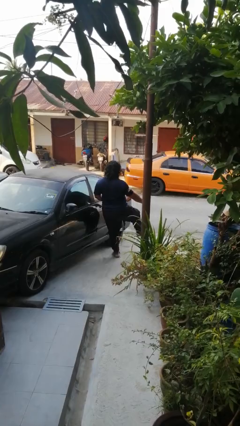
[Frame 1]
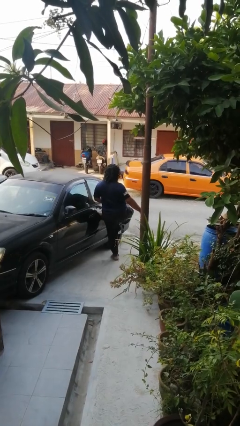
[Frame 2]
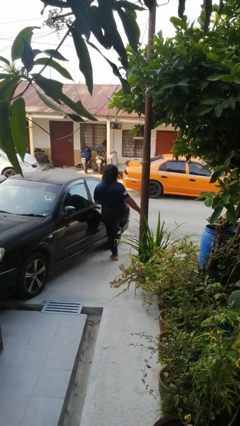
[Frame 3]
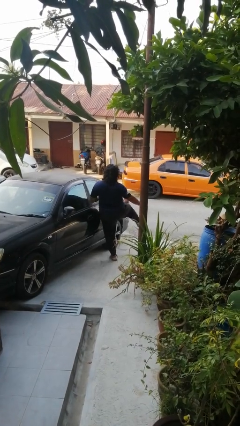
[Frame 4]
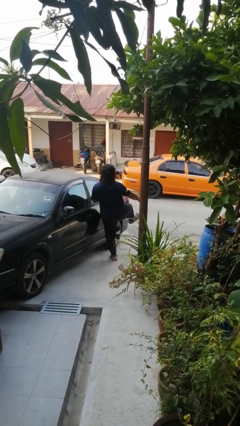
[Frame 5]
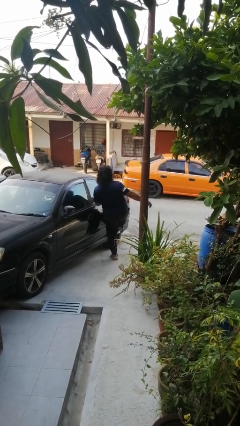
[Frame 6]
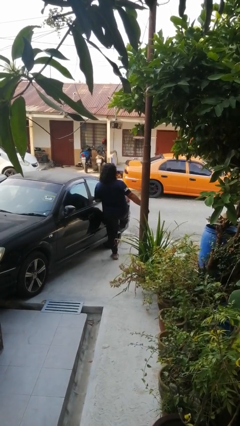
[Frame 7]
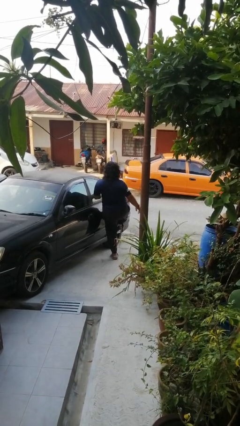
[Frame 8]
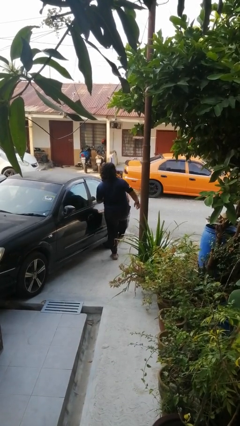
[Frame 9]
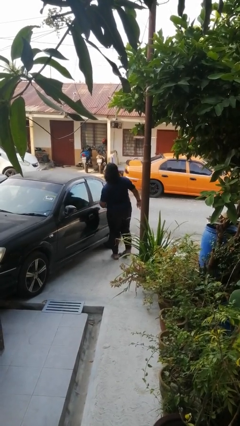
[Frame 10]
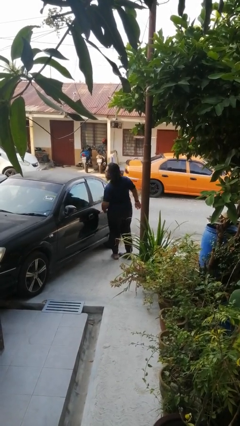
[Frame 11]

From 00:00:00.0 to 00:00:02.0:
person kicks car tires

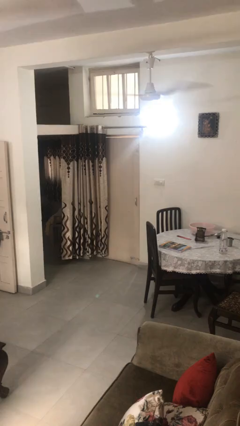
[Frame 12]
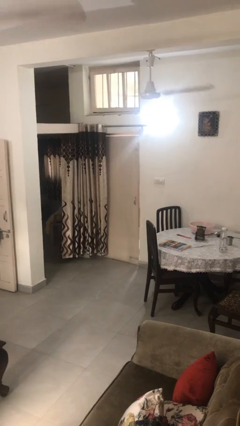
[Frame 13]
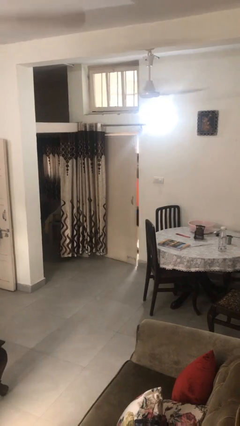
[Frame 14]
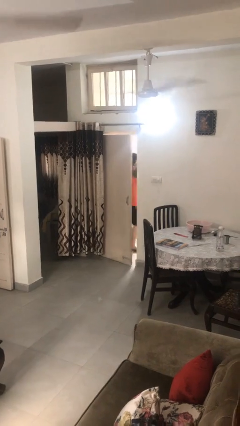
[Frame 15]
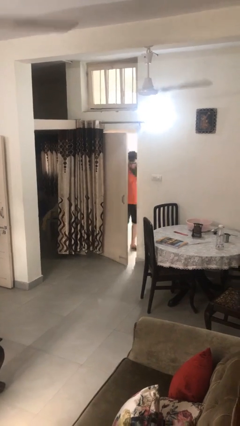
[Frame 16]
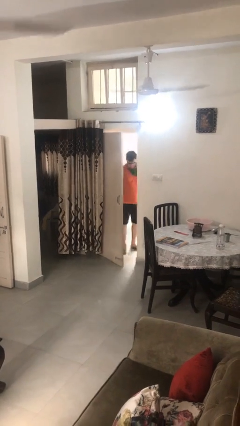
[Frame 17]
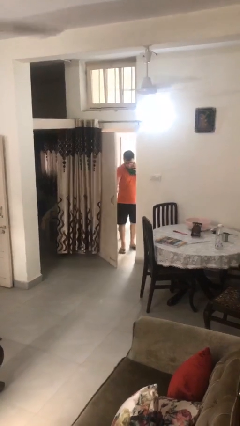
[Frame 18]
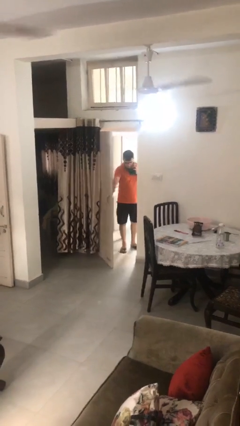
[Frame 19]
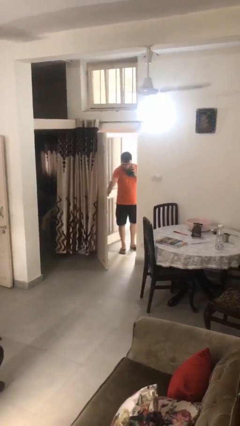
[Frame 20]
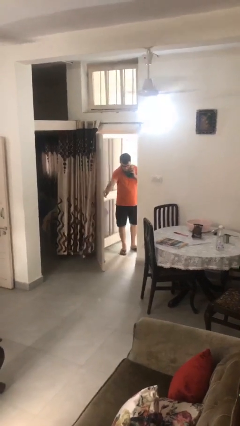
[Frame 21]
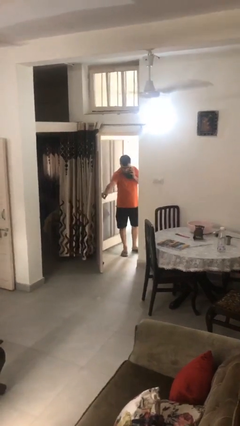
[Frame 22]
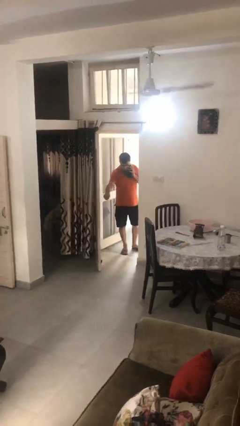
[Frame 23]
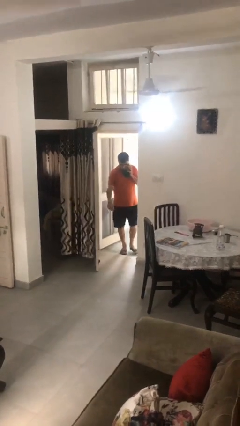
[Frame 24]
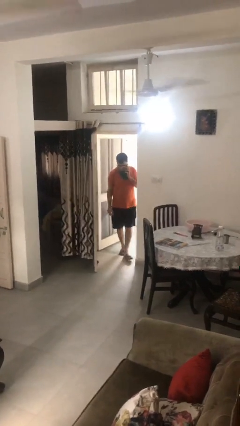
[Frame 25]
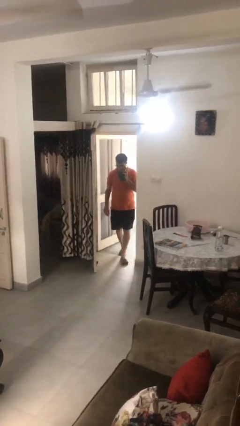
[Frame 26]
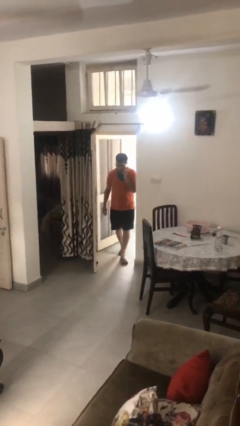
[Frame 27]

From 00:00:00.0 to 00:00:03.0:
person opens facility door

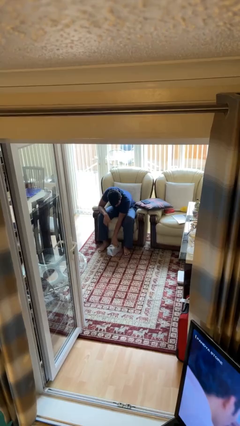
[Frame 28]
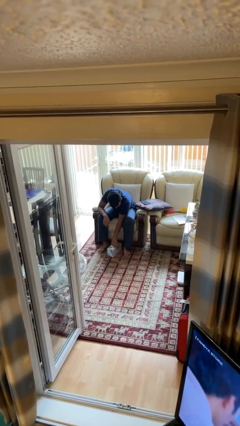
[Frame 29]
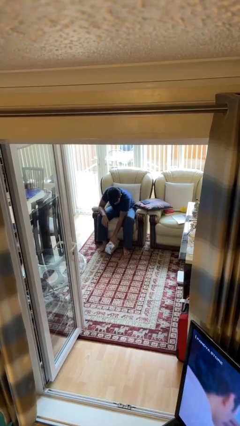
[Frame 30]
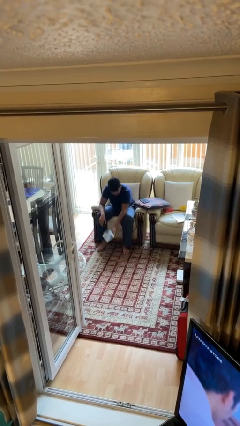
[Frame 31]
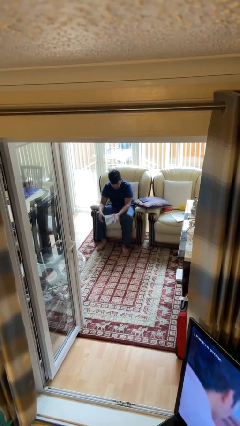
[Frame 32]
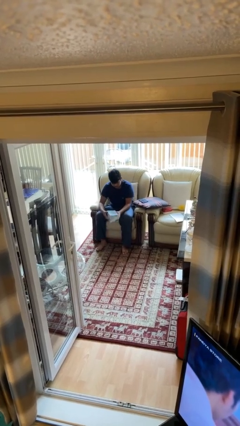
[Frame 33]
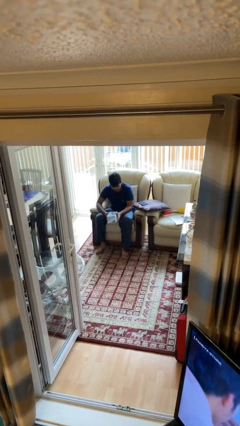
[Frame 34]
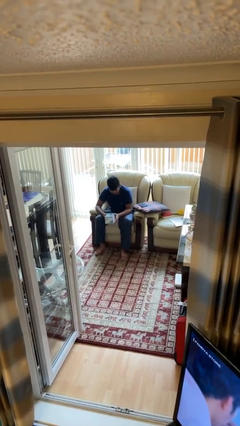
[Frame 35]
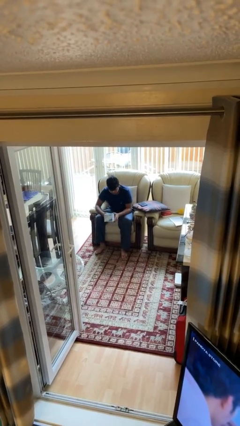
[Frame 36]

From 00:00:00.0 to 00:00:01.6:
person picks up object from floor

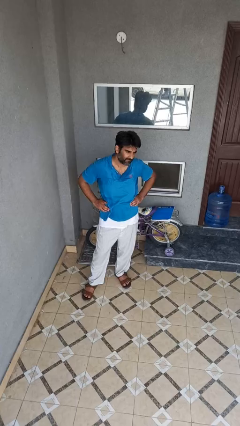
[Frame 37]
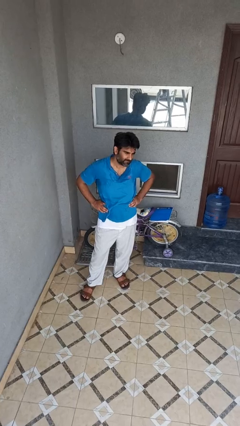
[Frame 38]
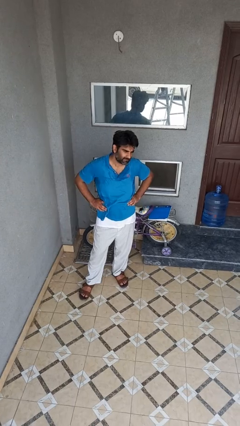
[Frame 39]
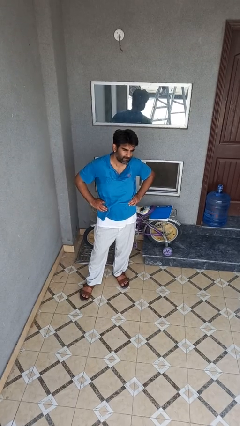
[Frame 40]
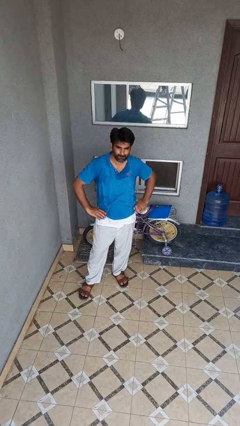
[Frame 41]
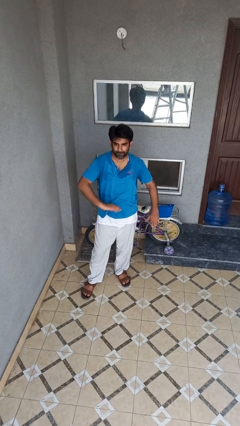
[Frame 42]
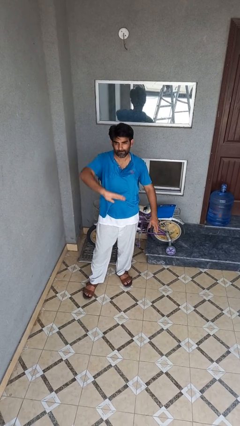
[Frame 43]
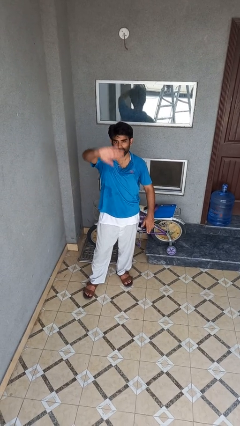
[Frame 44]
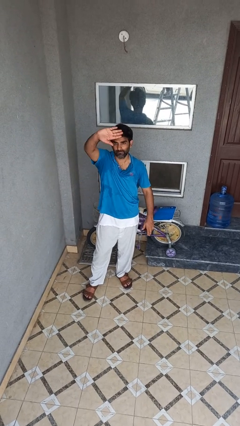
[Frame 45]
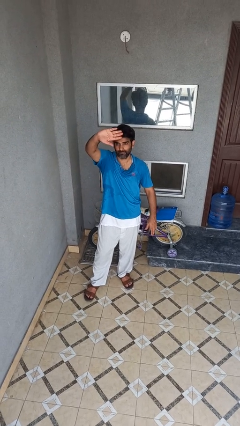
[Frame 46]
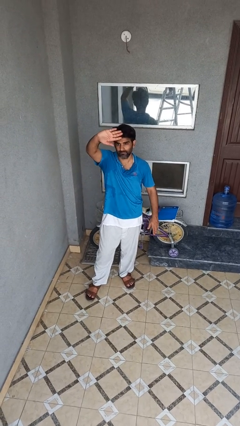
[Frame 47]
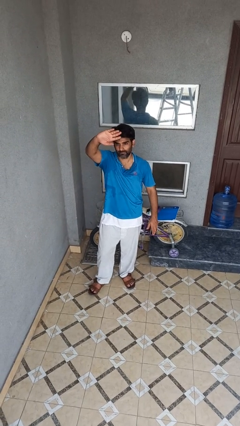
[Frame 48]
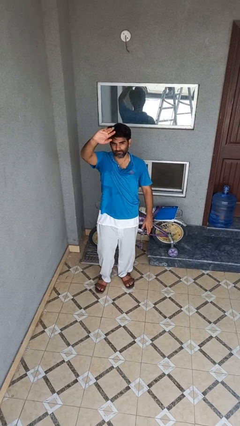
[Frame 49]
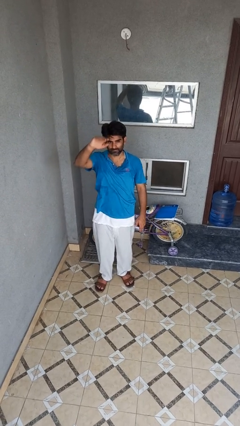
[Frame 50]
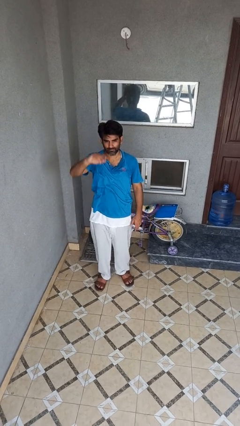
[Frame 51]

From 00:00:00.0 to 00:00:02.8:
person gestures swipe up

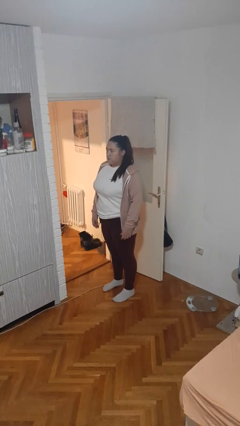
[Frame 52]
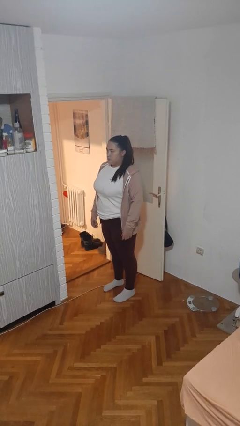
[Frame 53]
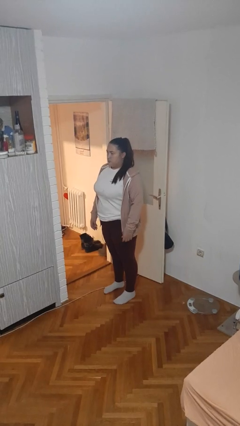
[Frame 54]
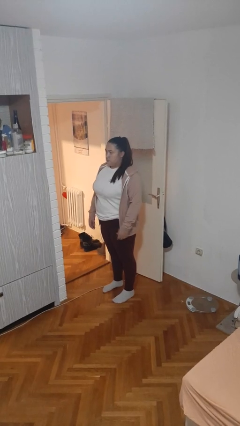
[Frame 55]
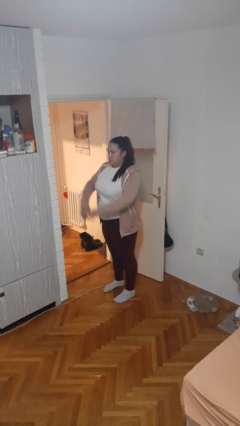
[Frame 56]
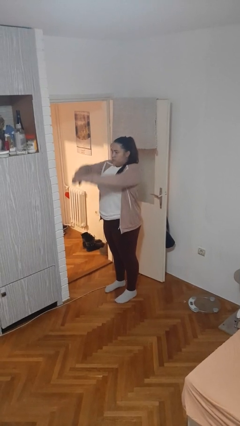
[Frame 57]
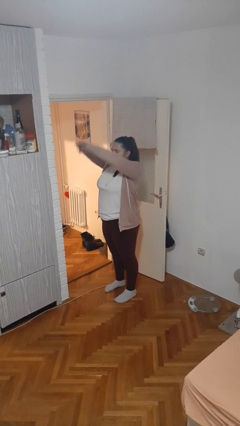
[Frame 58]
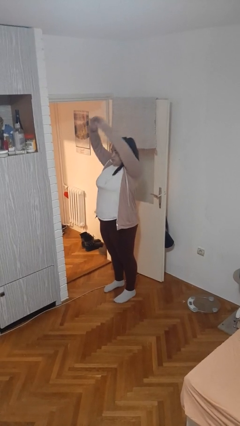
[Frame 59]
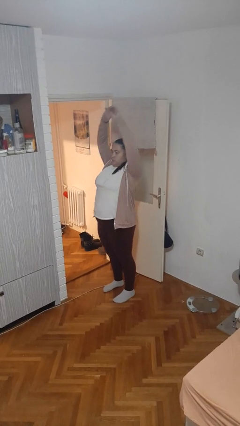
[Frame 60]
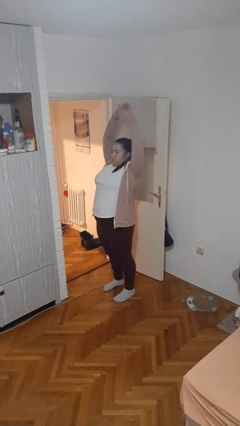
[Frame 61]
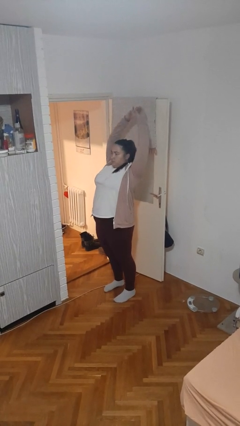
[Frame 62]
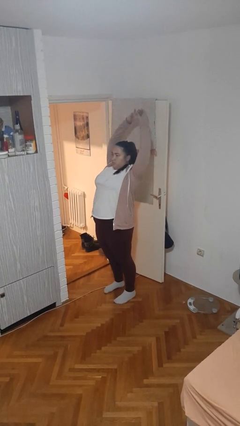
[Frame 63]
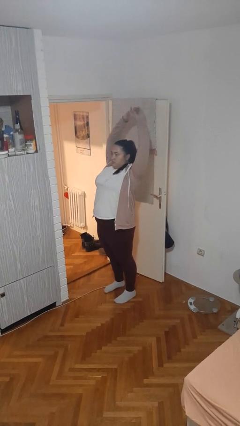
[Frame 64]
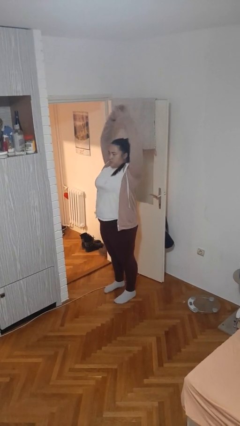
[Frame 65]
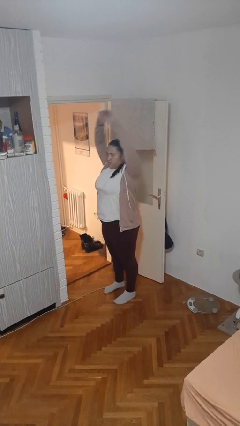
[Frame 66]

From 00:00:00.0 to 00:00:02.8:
person stretches arms over head

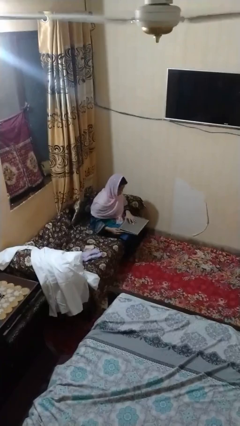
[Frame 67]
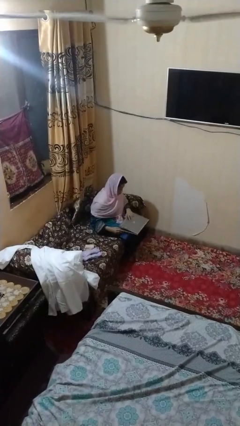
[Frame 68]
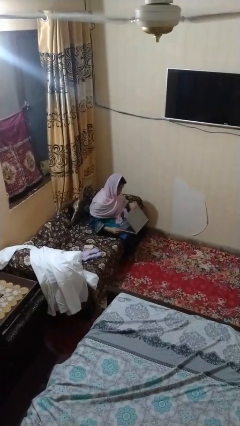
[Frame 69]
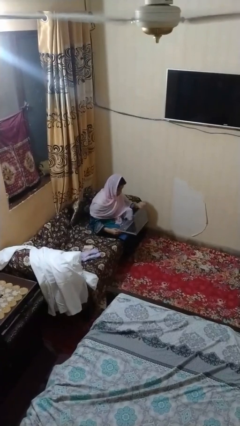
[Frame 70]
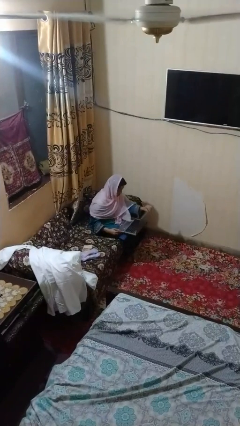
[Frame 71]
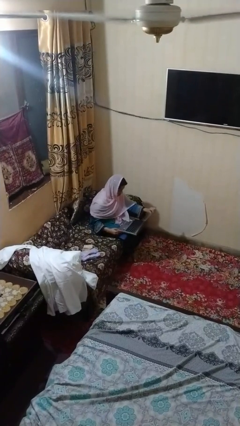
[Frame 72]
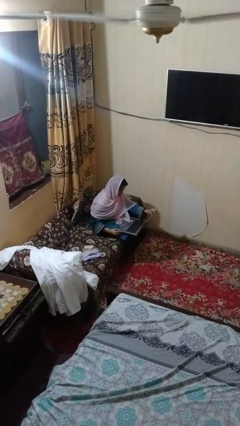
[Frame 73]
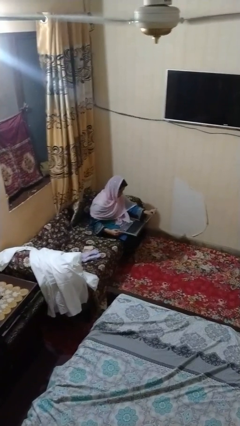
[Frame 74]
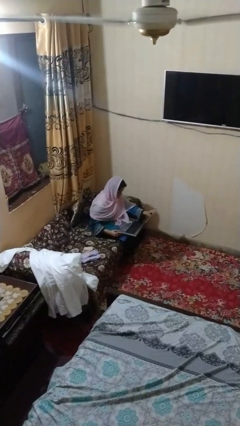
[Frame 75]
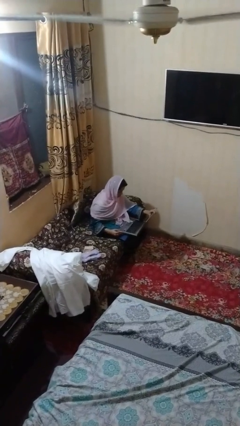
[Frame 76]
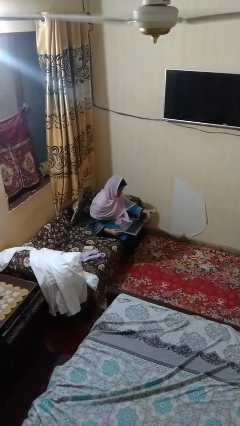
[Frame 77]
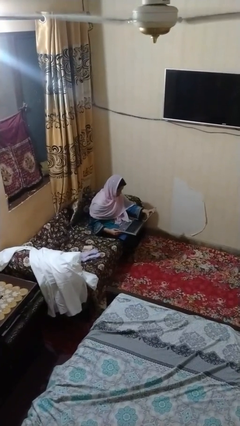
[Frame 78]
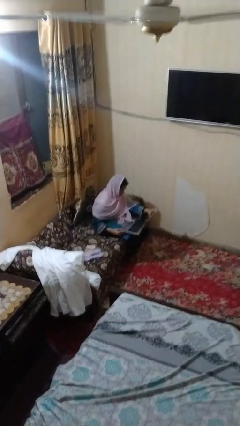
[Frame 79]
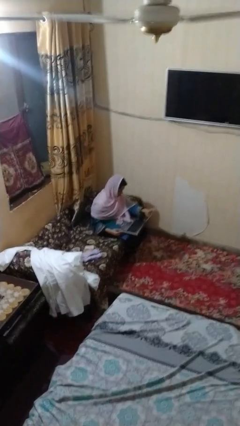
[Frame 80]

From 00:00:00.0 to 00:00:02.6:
person opens laptop

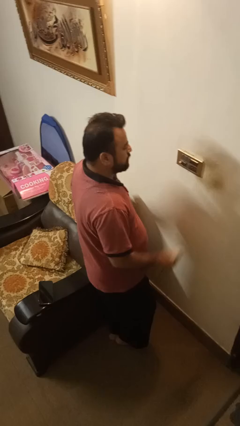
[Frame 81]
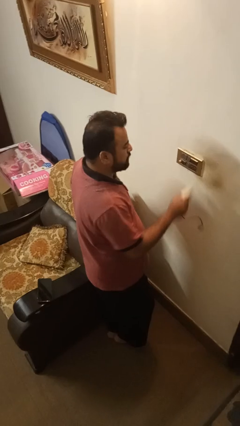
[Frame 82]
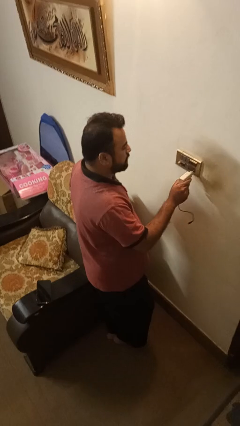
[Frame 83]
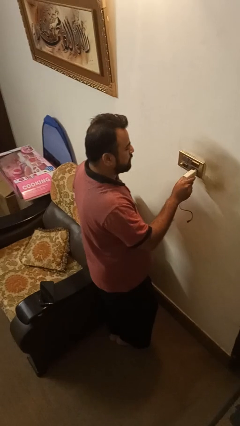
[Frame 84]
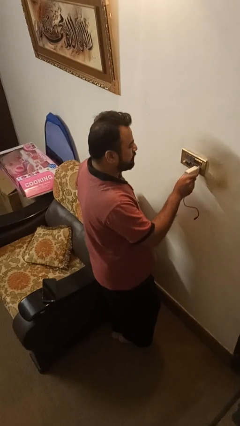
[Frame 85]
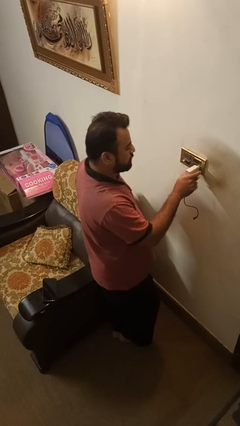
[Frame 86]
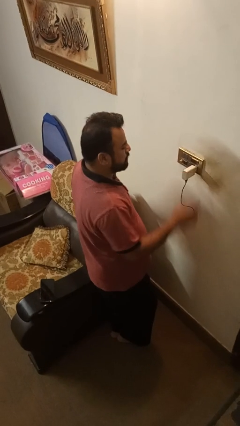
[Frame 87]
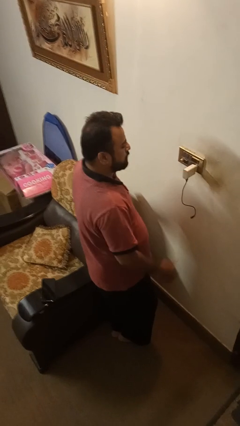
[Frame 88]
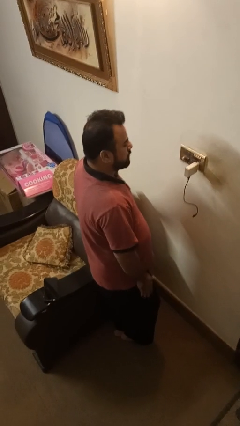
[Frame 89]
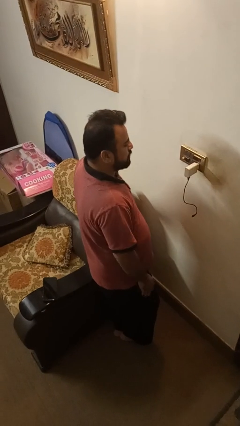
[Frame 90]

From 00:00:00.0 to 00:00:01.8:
person plugs into electrical socket

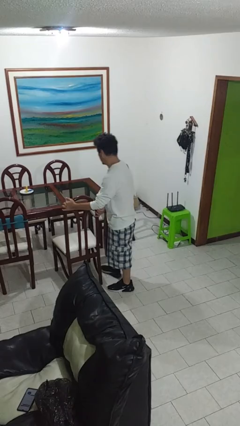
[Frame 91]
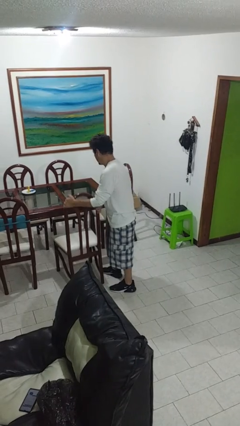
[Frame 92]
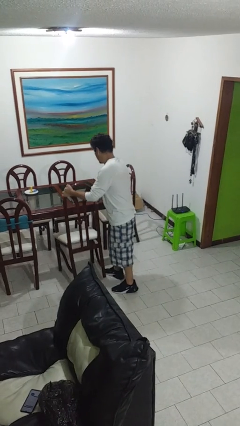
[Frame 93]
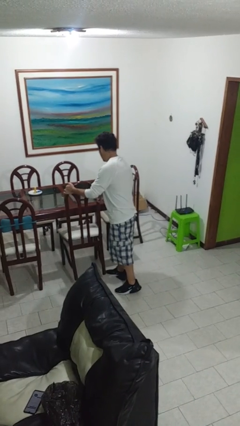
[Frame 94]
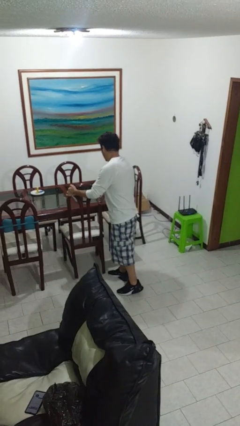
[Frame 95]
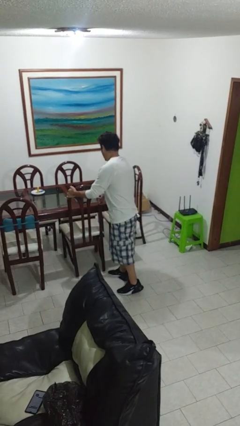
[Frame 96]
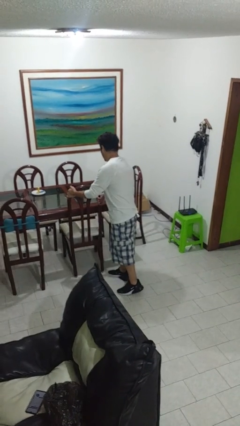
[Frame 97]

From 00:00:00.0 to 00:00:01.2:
person pushes in chair
